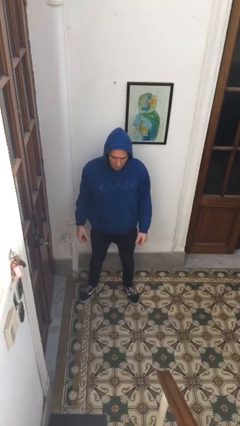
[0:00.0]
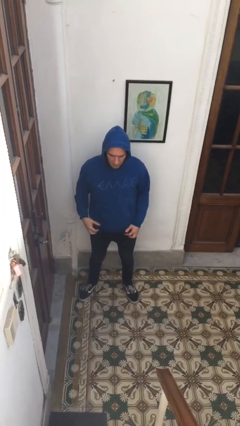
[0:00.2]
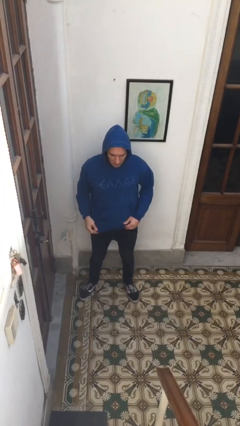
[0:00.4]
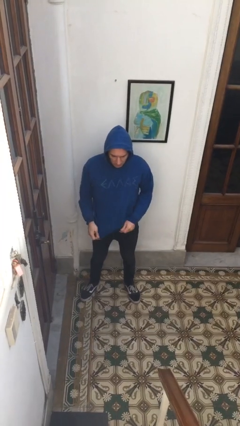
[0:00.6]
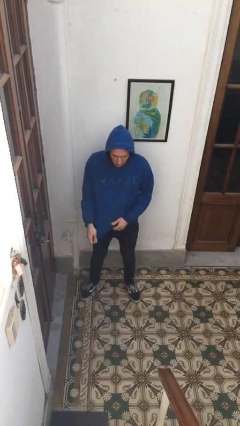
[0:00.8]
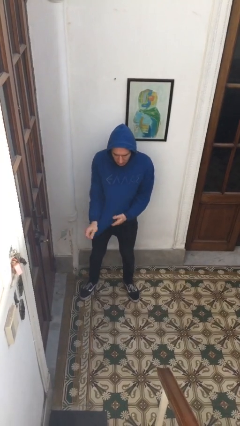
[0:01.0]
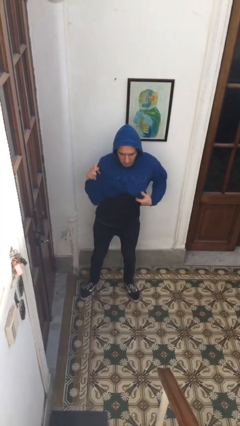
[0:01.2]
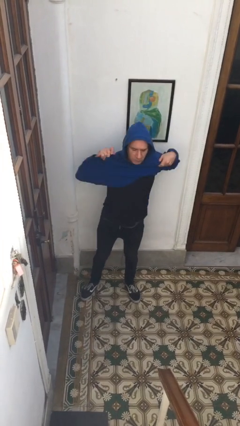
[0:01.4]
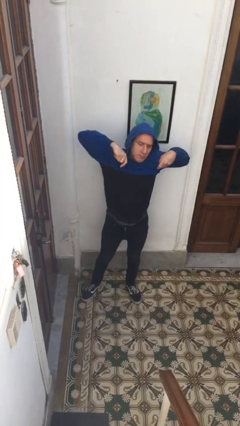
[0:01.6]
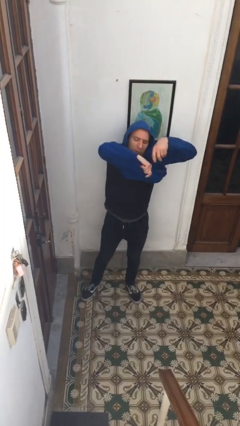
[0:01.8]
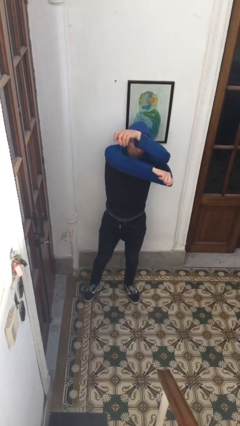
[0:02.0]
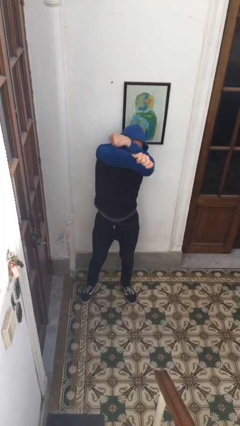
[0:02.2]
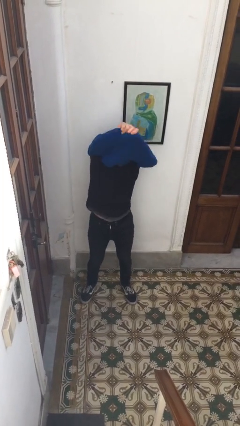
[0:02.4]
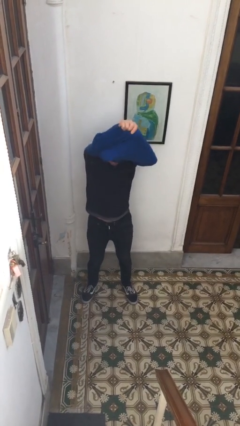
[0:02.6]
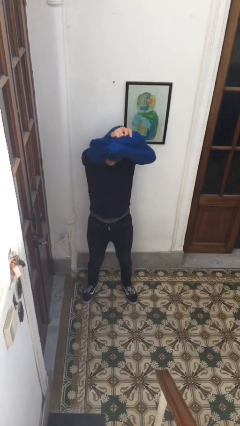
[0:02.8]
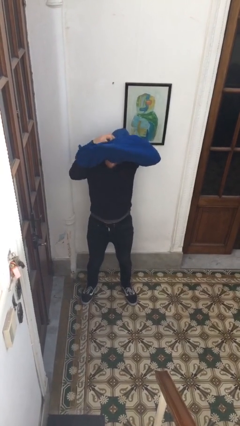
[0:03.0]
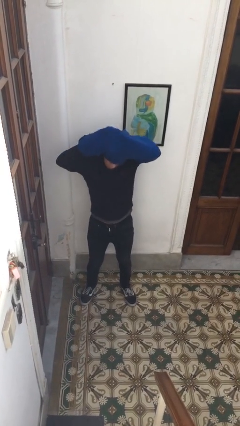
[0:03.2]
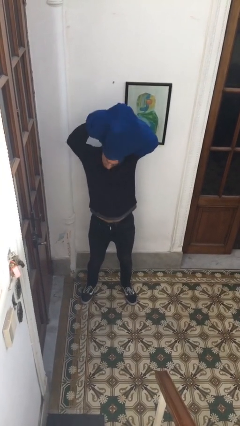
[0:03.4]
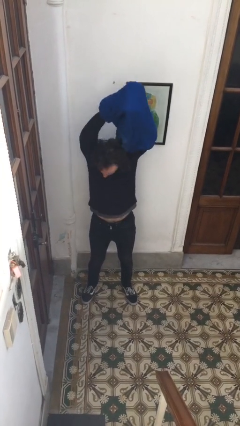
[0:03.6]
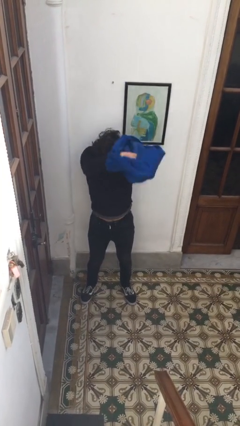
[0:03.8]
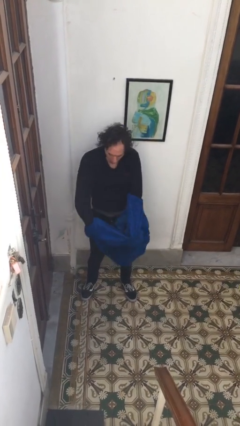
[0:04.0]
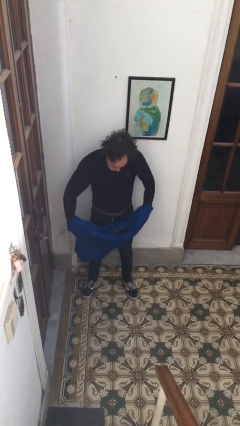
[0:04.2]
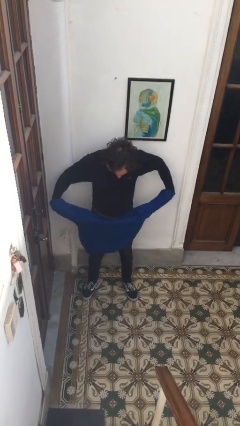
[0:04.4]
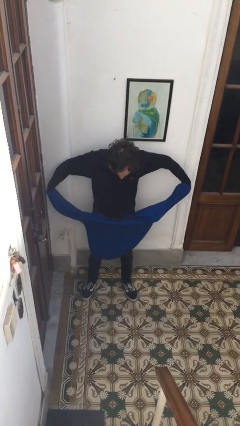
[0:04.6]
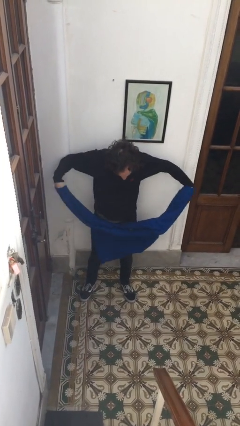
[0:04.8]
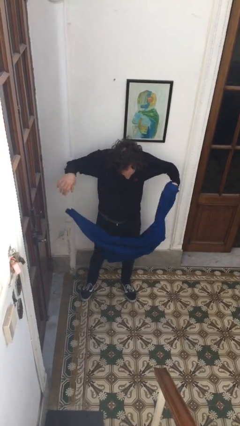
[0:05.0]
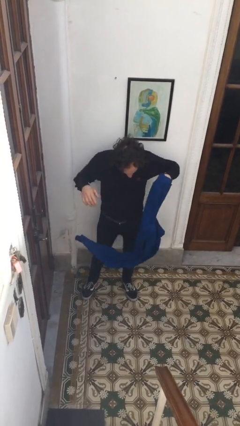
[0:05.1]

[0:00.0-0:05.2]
person takes off hoodie

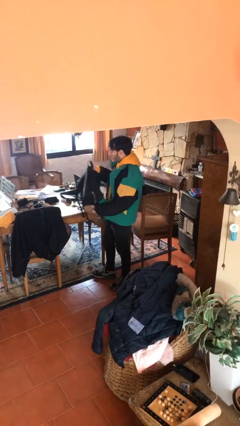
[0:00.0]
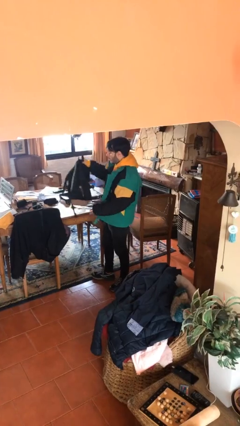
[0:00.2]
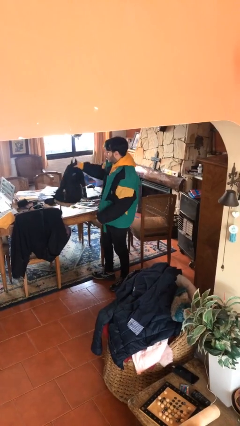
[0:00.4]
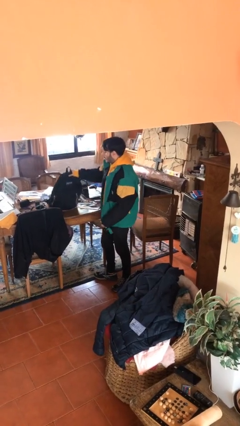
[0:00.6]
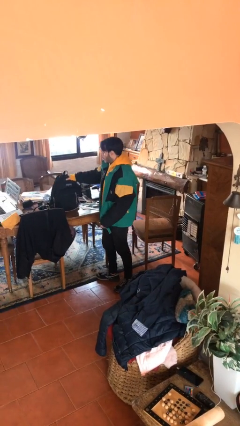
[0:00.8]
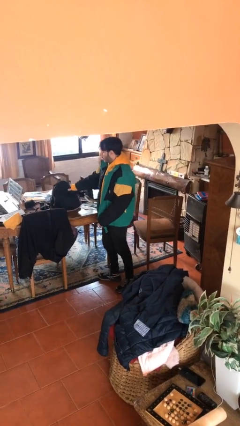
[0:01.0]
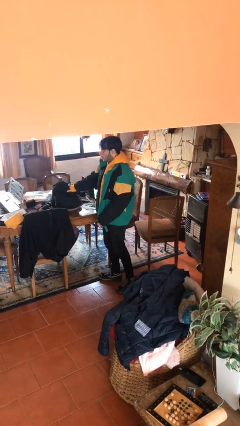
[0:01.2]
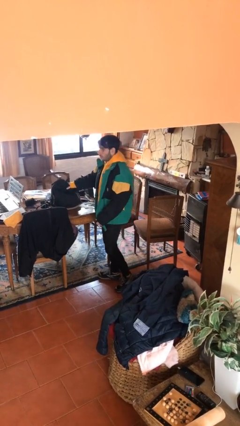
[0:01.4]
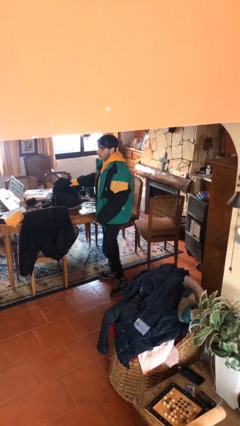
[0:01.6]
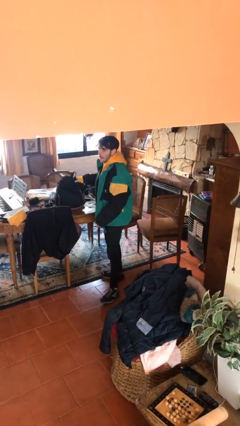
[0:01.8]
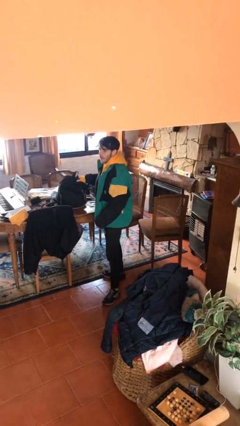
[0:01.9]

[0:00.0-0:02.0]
person puts down object on table

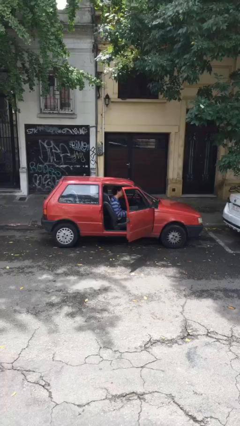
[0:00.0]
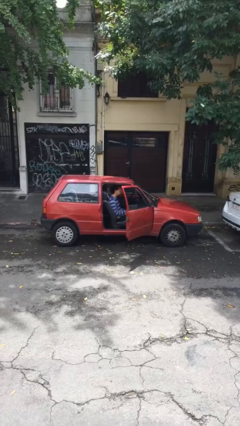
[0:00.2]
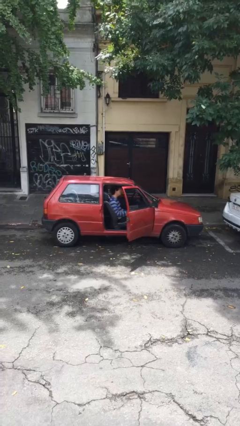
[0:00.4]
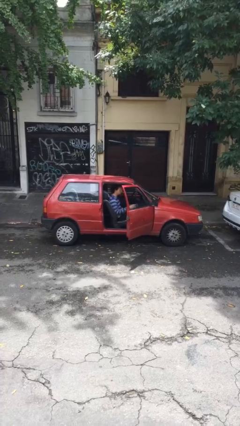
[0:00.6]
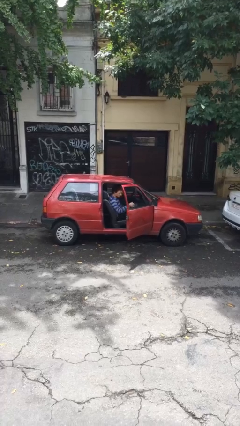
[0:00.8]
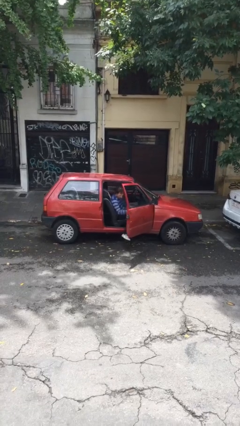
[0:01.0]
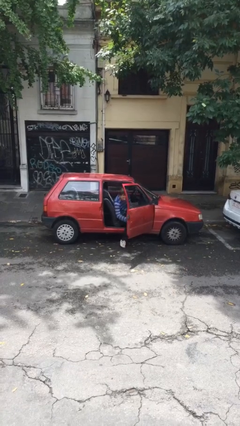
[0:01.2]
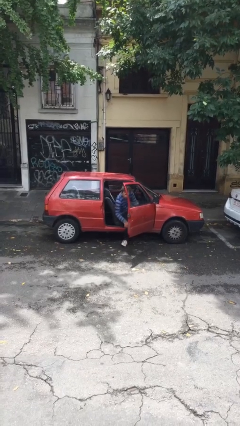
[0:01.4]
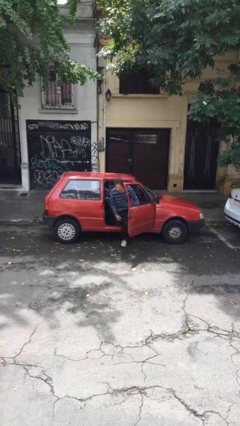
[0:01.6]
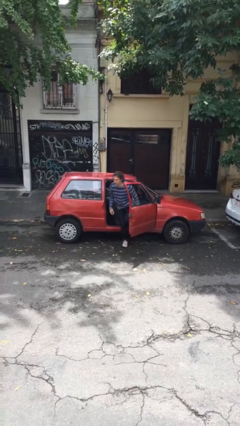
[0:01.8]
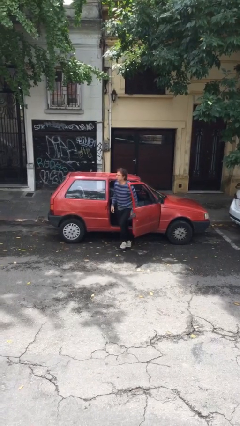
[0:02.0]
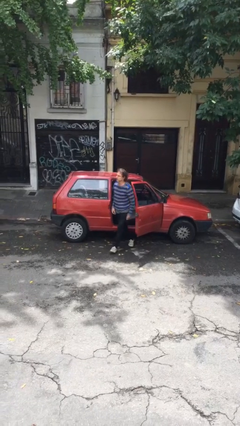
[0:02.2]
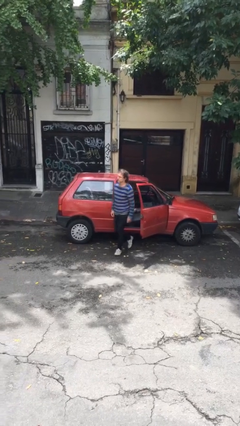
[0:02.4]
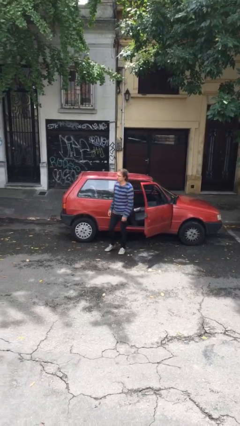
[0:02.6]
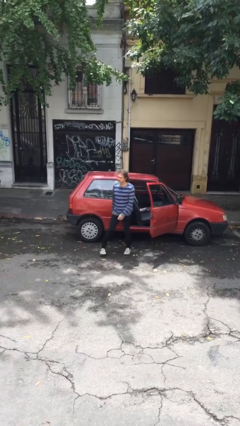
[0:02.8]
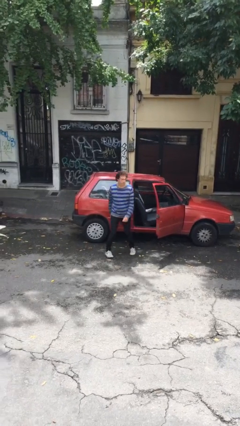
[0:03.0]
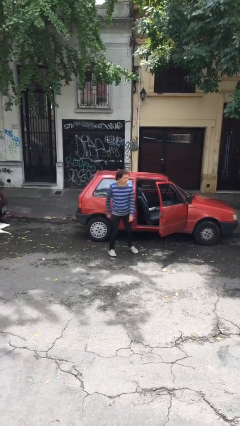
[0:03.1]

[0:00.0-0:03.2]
person exits car

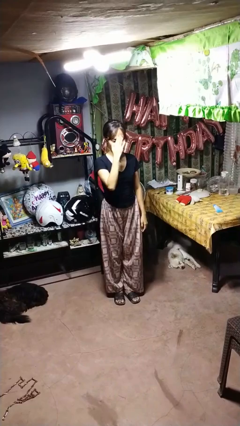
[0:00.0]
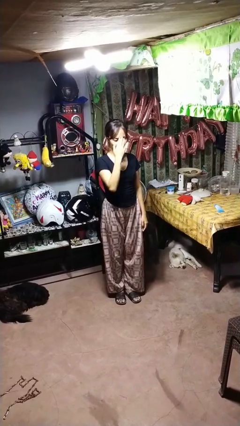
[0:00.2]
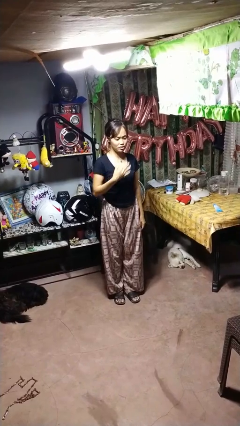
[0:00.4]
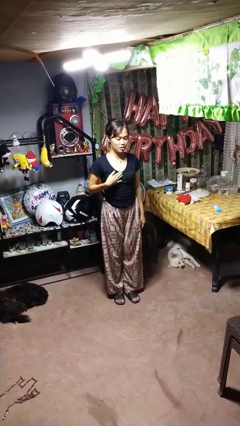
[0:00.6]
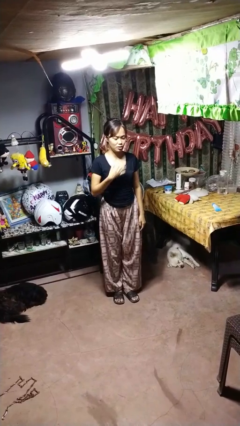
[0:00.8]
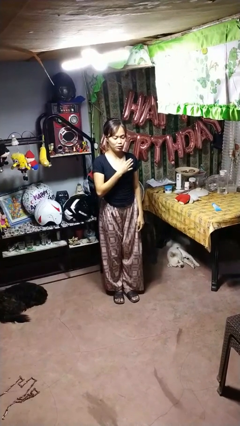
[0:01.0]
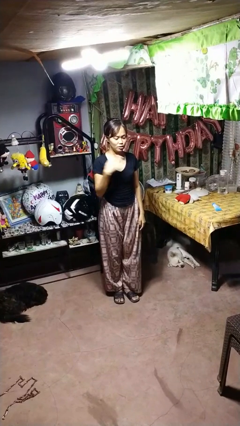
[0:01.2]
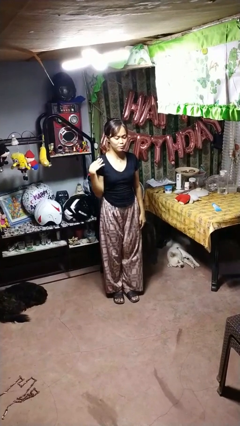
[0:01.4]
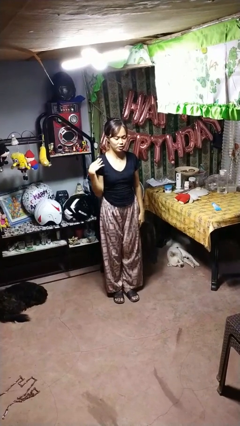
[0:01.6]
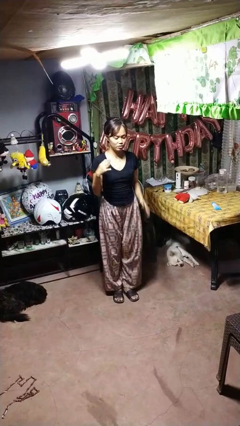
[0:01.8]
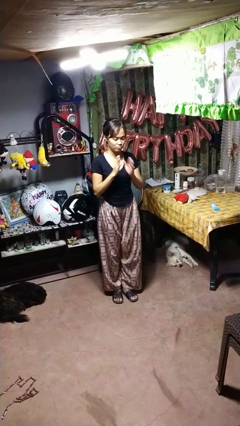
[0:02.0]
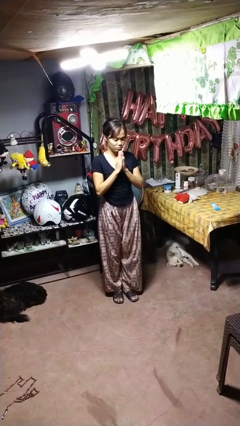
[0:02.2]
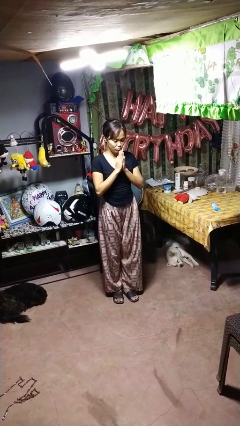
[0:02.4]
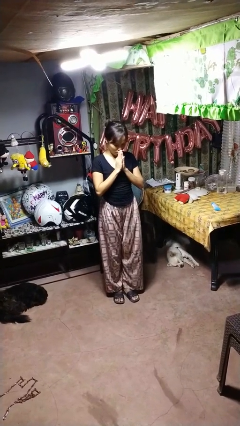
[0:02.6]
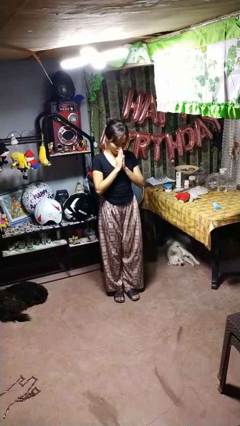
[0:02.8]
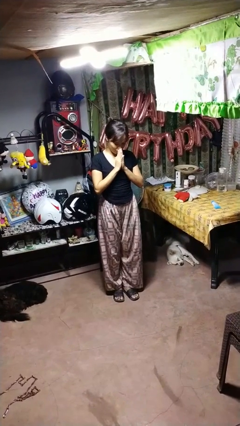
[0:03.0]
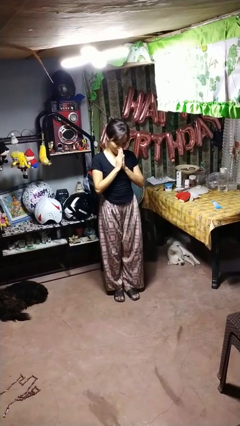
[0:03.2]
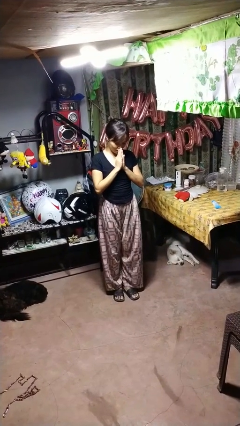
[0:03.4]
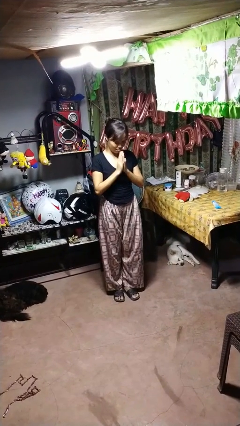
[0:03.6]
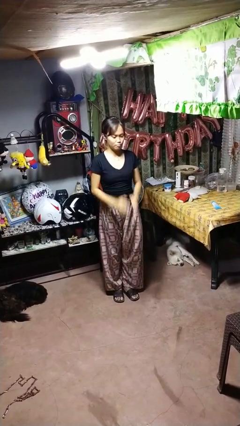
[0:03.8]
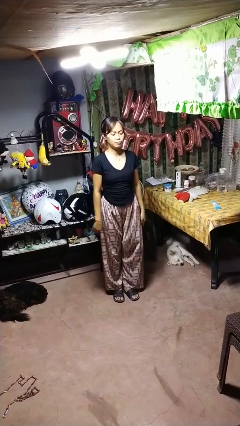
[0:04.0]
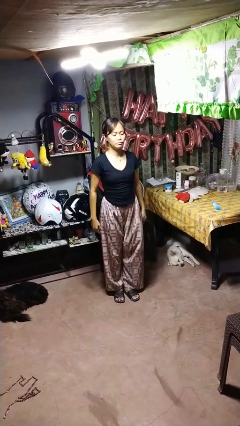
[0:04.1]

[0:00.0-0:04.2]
person prays

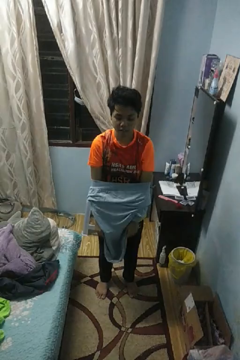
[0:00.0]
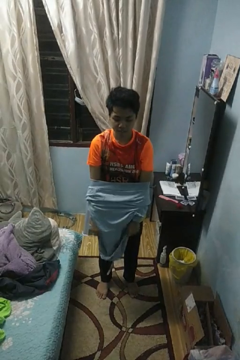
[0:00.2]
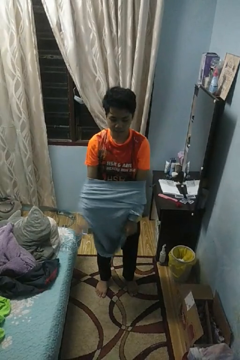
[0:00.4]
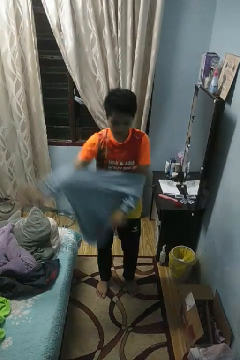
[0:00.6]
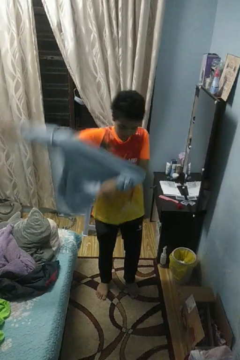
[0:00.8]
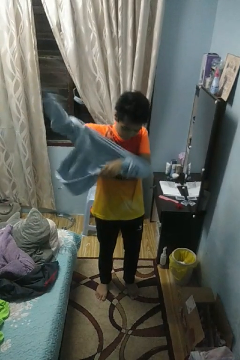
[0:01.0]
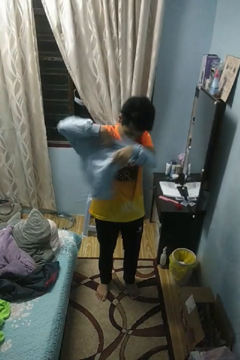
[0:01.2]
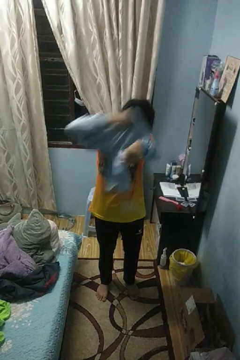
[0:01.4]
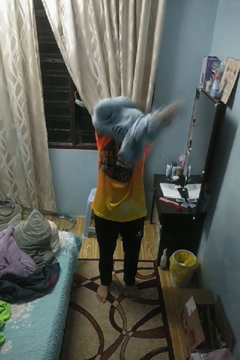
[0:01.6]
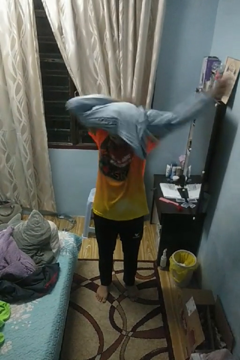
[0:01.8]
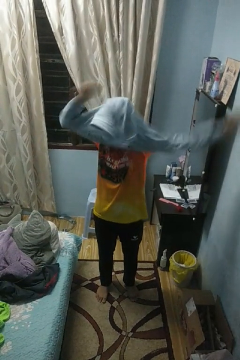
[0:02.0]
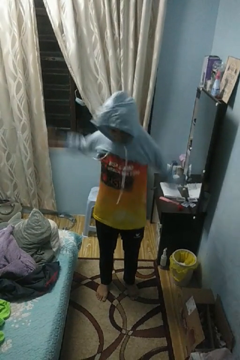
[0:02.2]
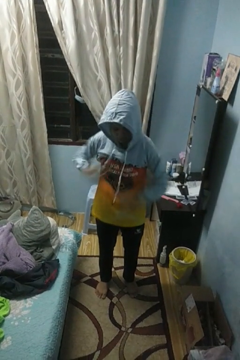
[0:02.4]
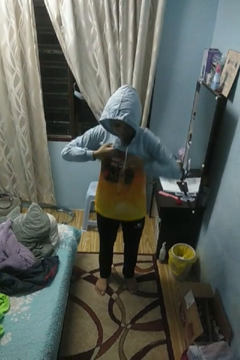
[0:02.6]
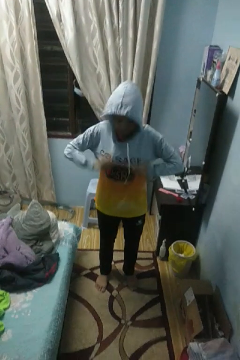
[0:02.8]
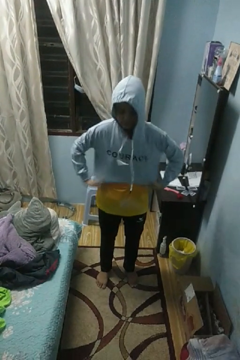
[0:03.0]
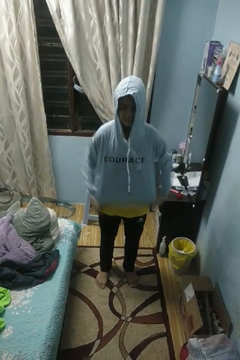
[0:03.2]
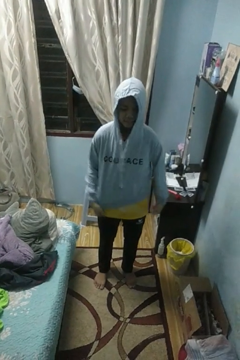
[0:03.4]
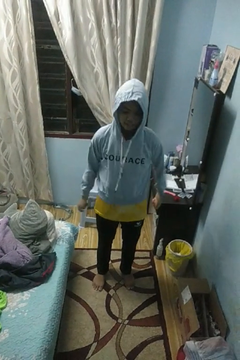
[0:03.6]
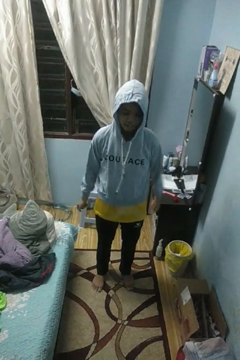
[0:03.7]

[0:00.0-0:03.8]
person puts on hoodie
